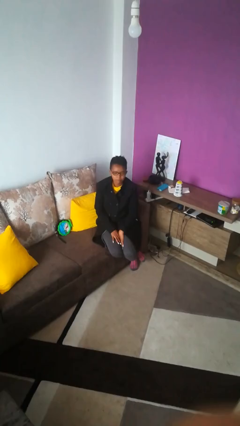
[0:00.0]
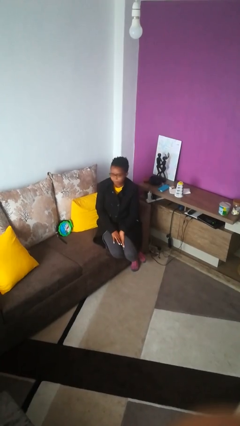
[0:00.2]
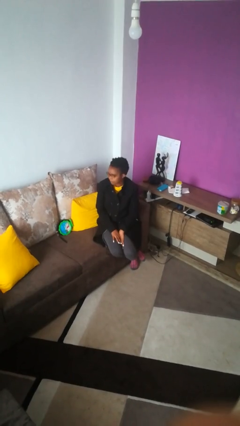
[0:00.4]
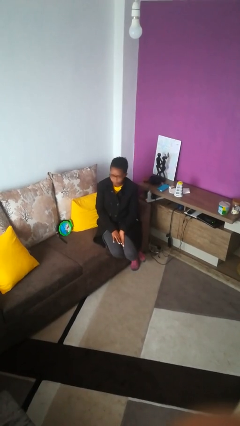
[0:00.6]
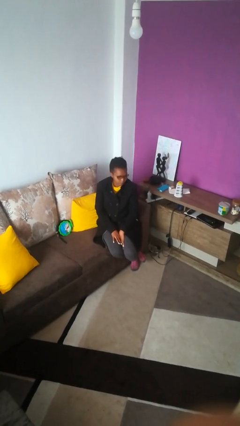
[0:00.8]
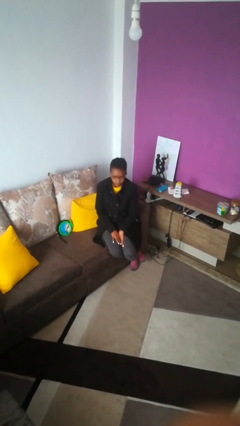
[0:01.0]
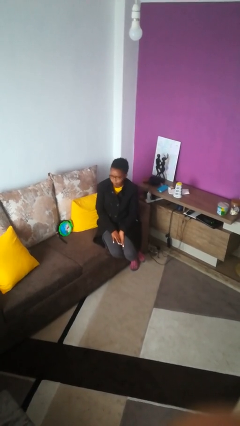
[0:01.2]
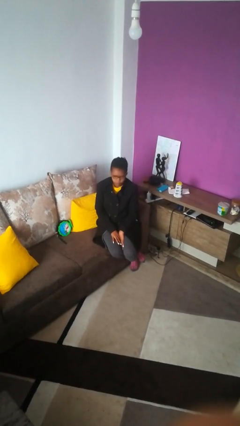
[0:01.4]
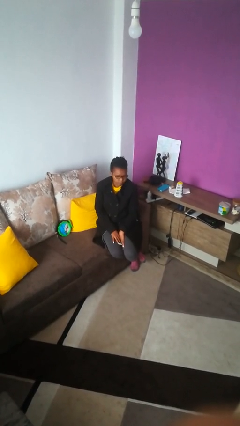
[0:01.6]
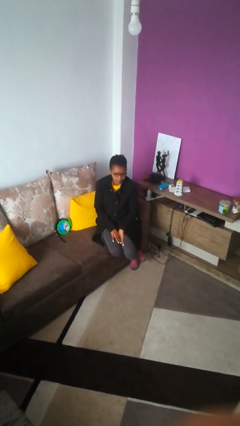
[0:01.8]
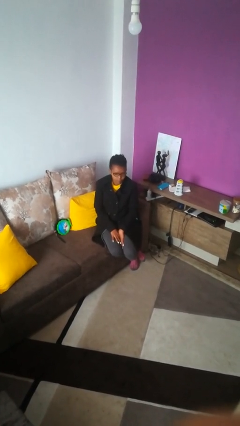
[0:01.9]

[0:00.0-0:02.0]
person shakes head

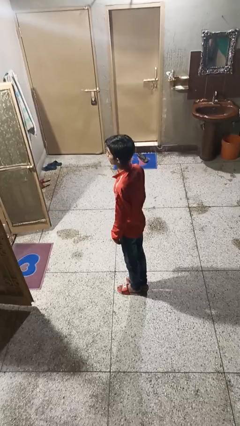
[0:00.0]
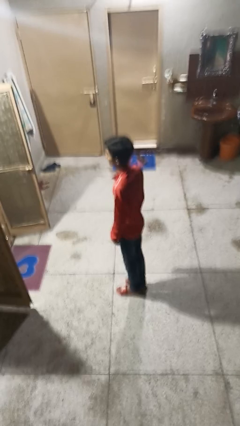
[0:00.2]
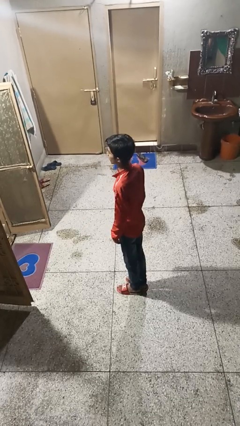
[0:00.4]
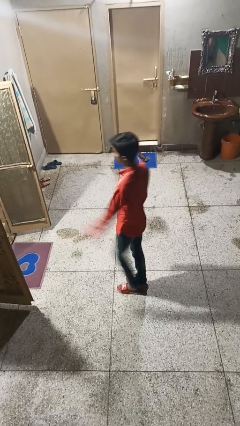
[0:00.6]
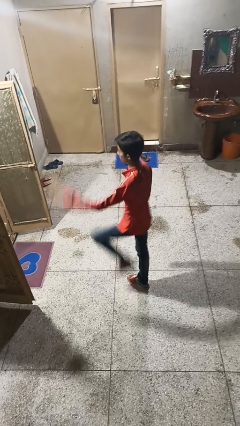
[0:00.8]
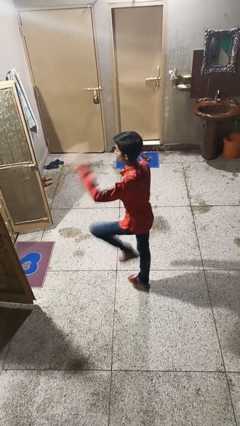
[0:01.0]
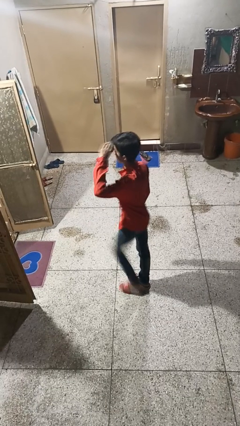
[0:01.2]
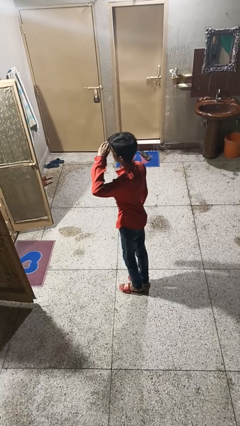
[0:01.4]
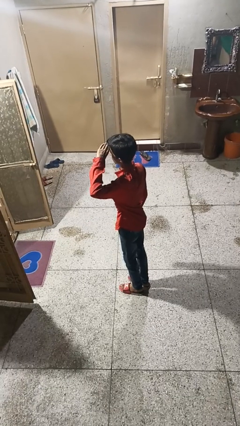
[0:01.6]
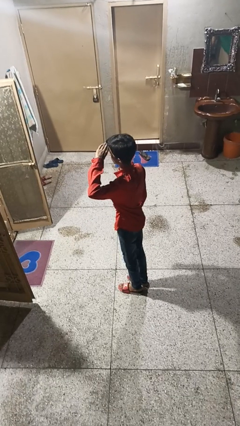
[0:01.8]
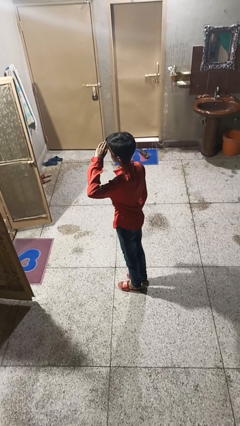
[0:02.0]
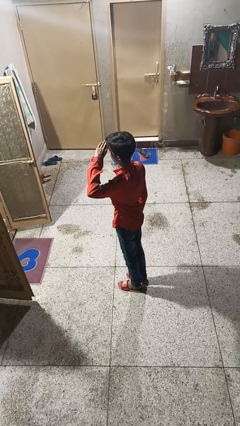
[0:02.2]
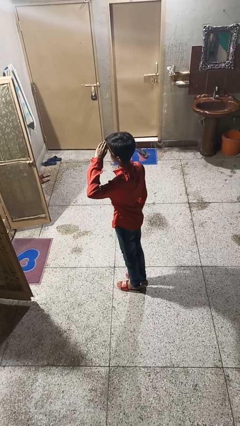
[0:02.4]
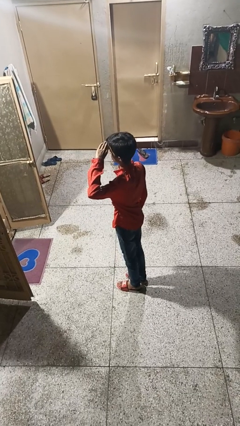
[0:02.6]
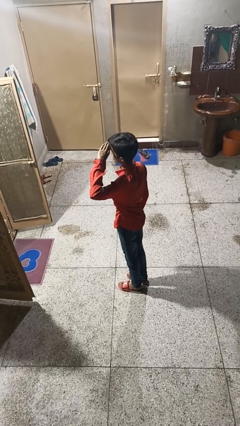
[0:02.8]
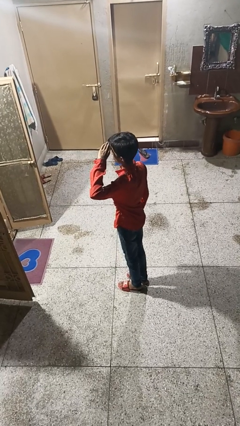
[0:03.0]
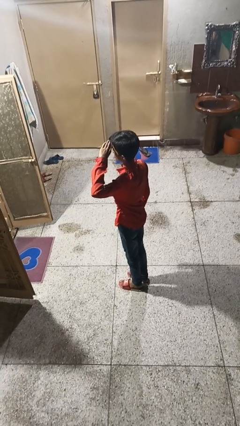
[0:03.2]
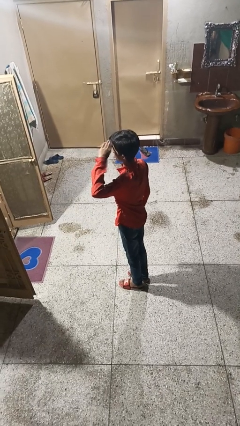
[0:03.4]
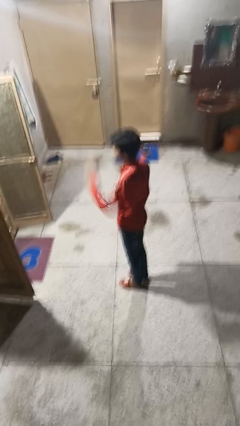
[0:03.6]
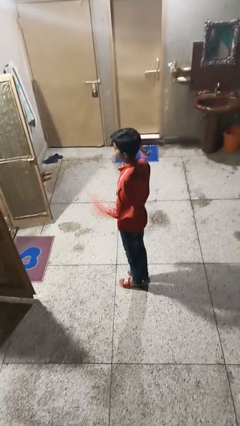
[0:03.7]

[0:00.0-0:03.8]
person salutes

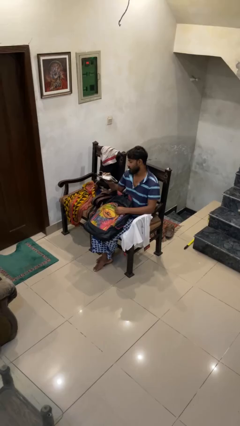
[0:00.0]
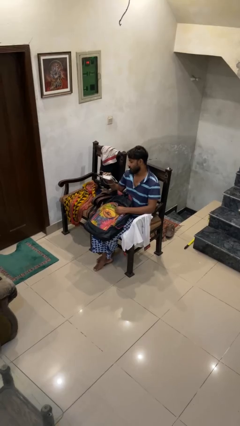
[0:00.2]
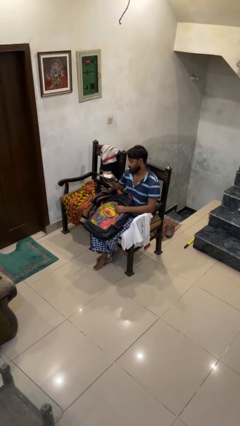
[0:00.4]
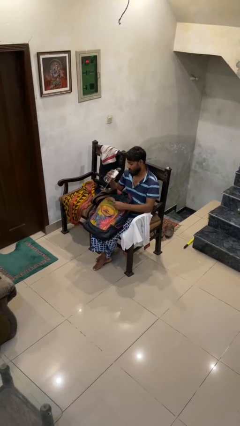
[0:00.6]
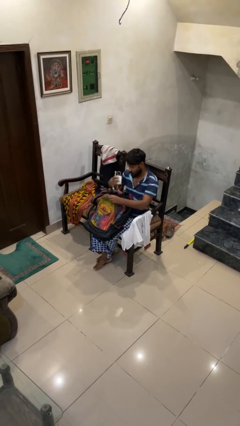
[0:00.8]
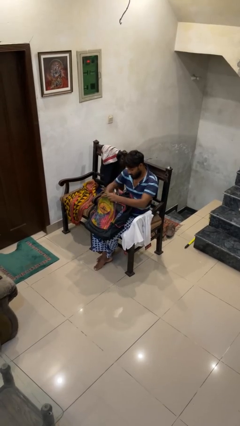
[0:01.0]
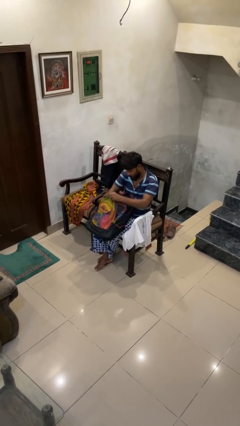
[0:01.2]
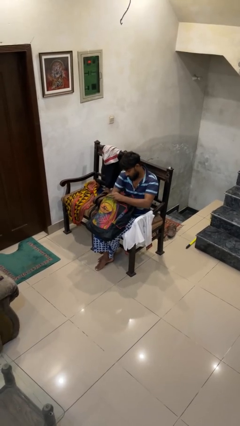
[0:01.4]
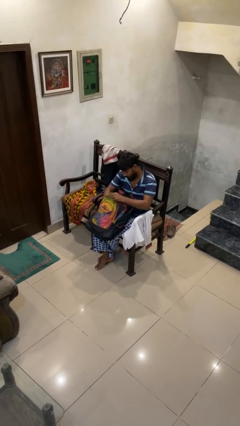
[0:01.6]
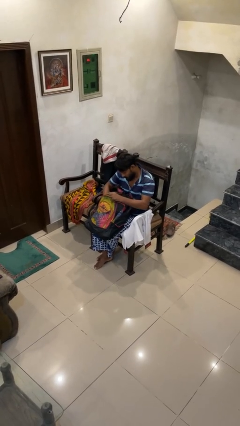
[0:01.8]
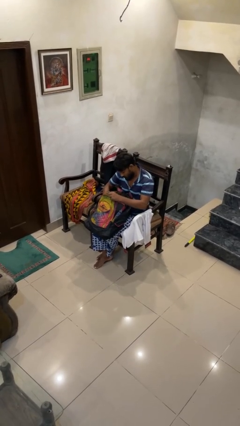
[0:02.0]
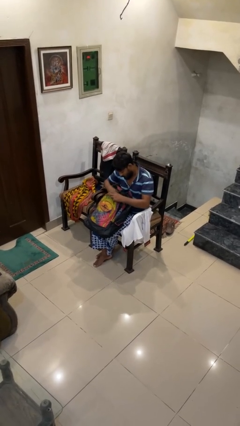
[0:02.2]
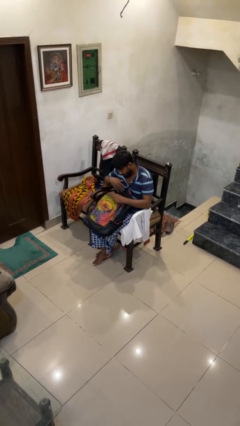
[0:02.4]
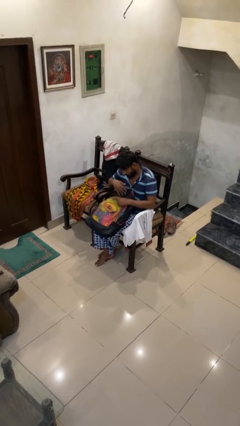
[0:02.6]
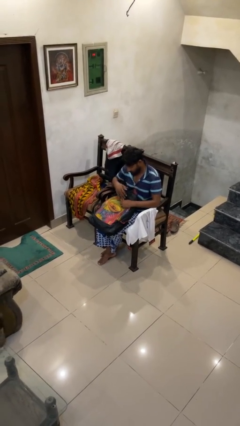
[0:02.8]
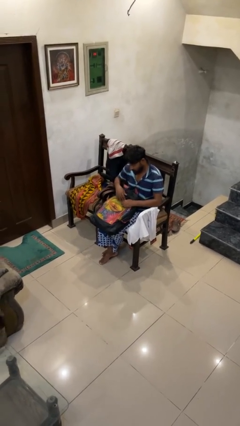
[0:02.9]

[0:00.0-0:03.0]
person puts object into backpack

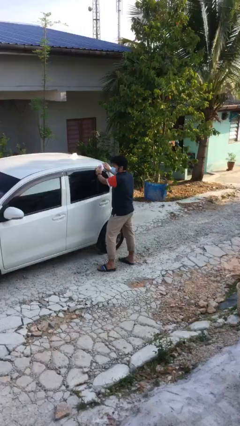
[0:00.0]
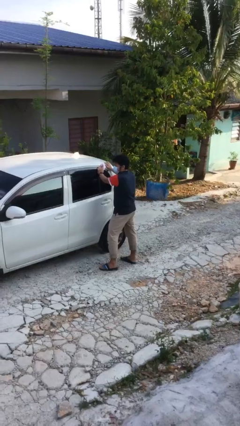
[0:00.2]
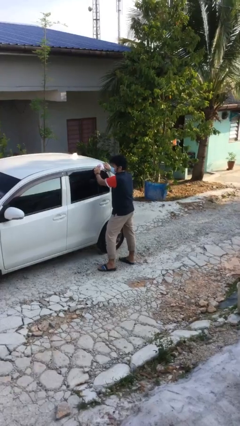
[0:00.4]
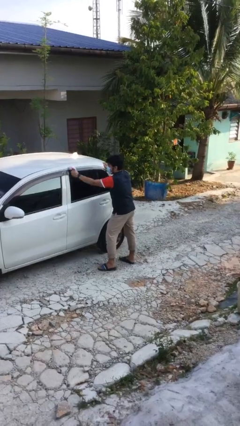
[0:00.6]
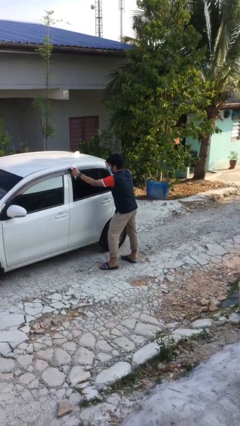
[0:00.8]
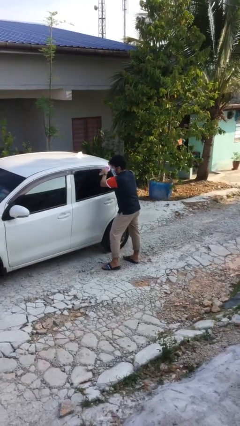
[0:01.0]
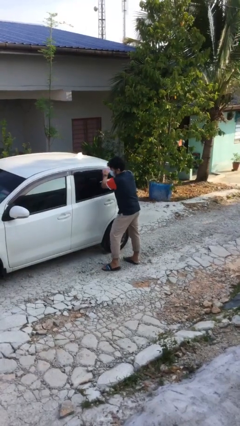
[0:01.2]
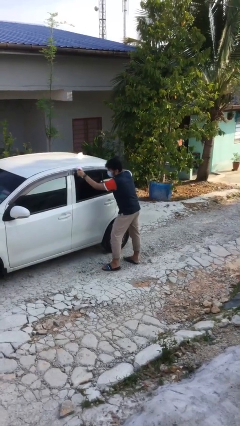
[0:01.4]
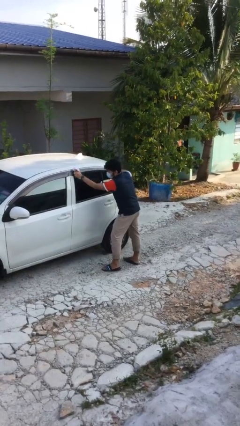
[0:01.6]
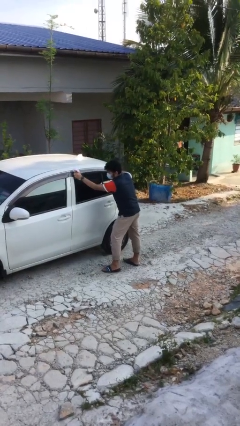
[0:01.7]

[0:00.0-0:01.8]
person polishes car with rag

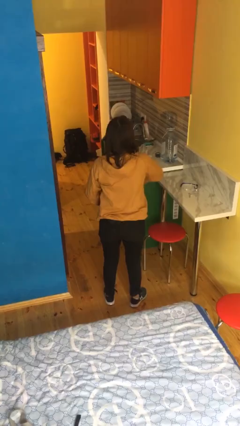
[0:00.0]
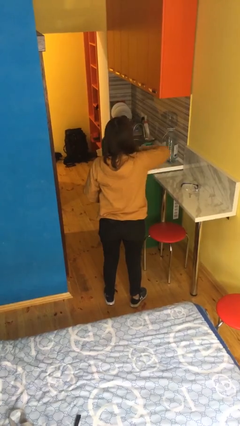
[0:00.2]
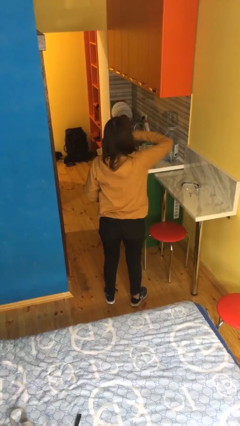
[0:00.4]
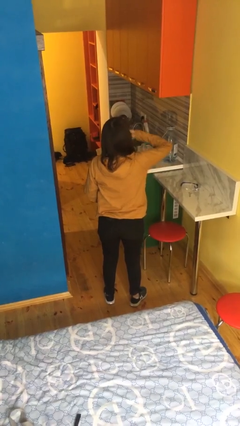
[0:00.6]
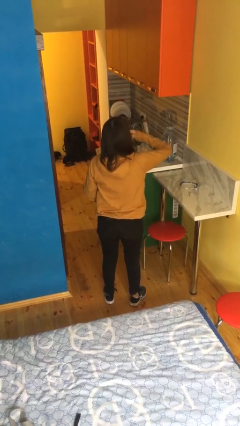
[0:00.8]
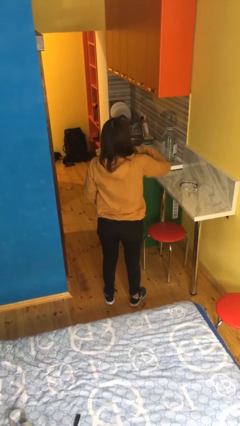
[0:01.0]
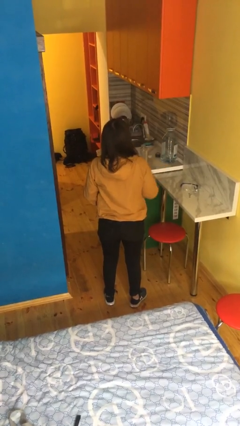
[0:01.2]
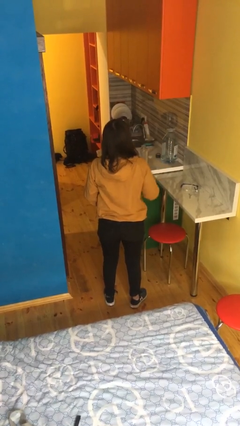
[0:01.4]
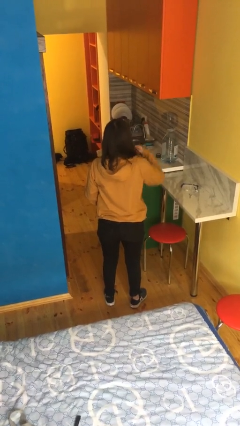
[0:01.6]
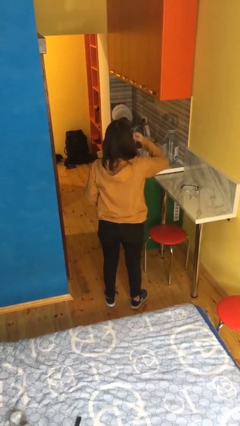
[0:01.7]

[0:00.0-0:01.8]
person zips up jacket

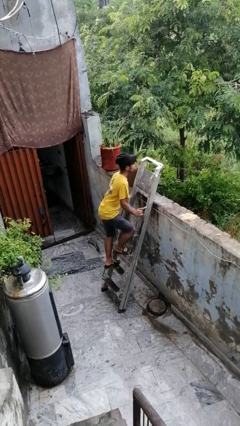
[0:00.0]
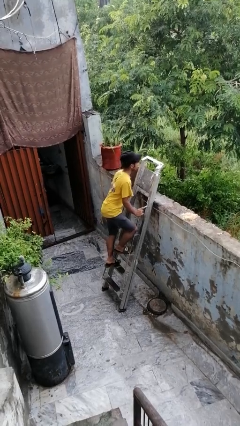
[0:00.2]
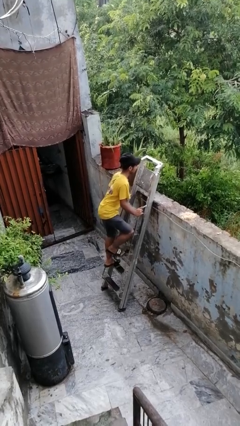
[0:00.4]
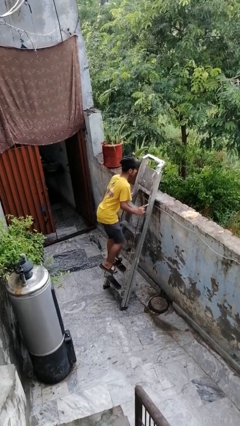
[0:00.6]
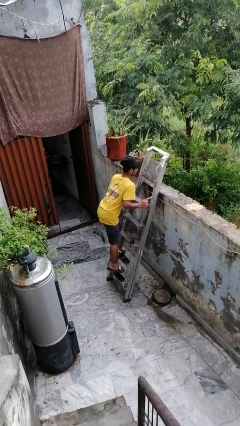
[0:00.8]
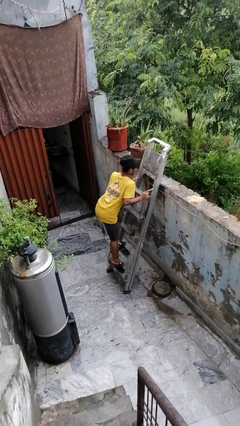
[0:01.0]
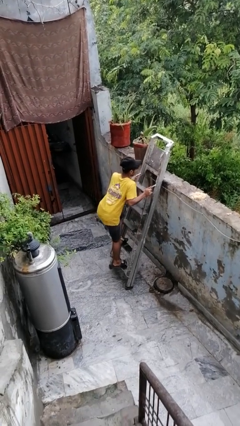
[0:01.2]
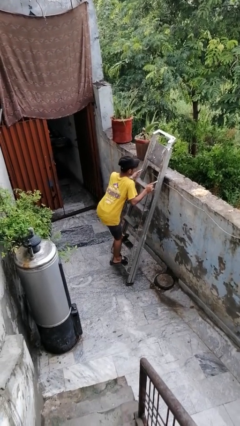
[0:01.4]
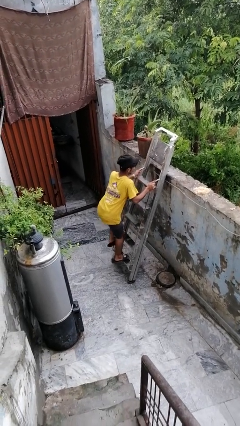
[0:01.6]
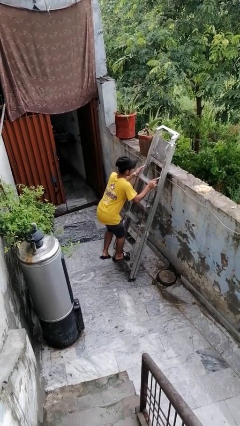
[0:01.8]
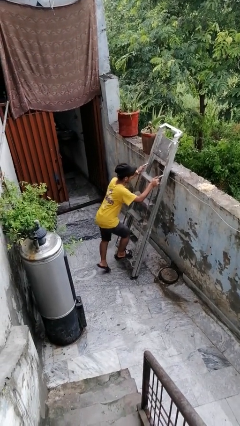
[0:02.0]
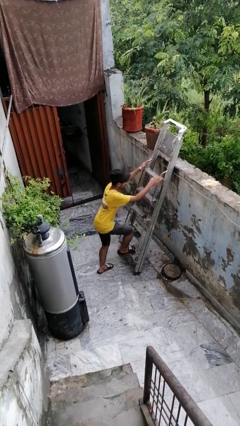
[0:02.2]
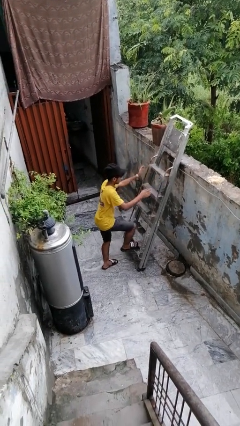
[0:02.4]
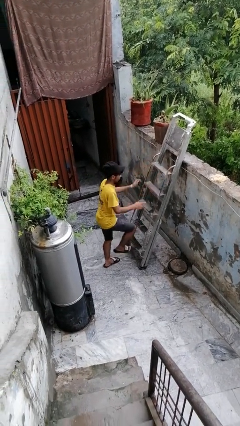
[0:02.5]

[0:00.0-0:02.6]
person climbs down ladder

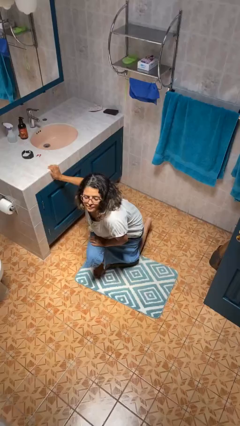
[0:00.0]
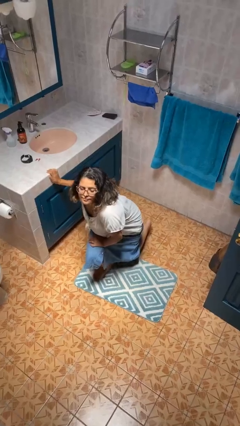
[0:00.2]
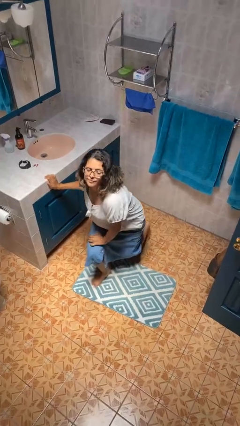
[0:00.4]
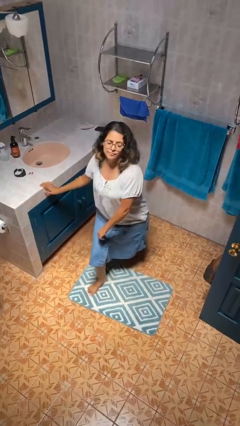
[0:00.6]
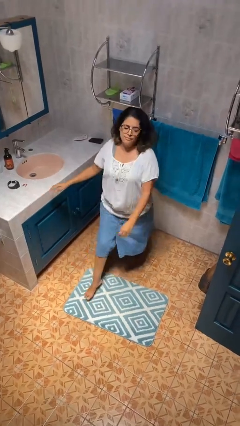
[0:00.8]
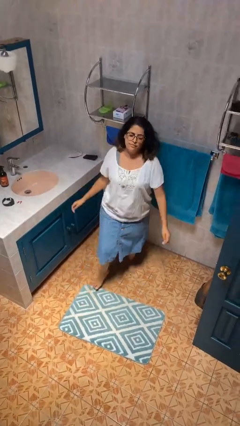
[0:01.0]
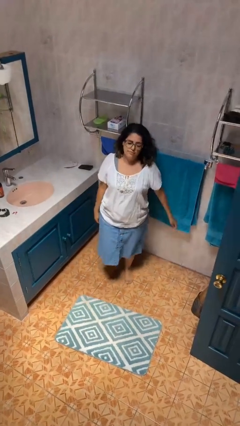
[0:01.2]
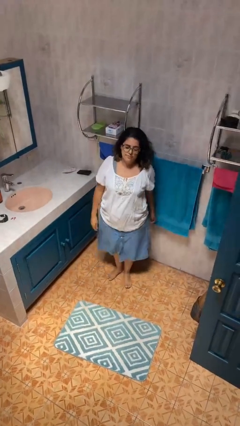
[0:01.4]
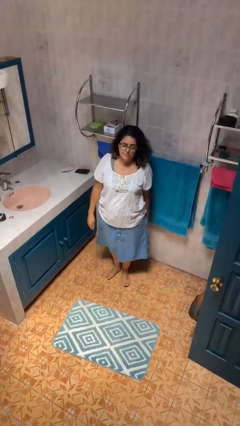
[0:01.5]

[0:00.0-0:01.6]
person stands up from floor

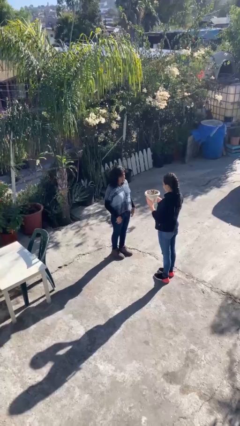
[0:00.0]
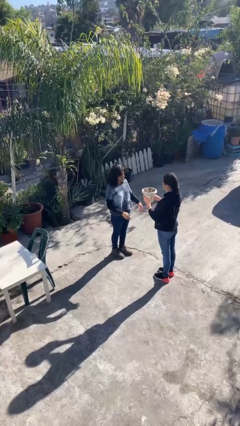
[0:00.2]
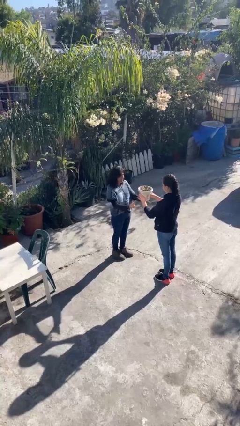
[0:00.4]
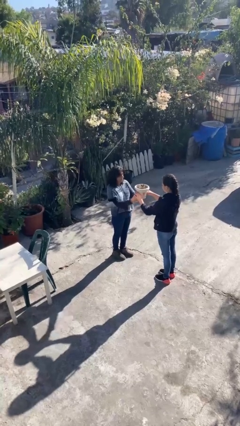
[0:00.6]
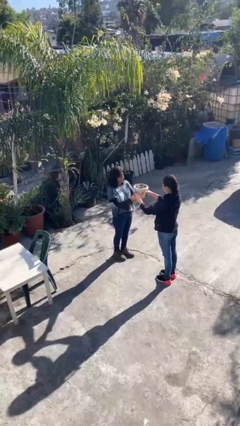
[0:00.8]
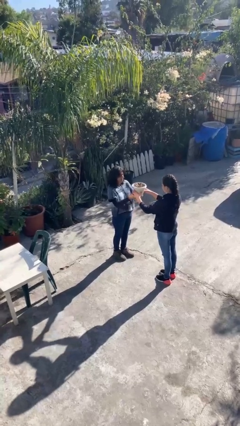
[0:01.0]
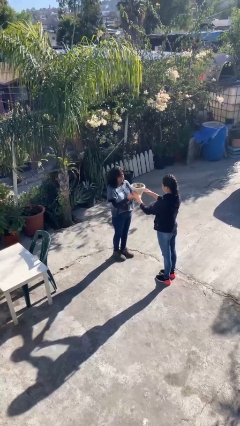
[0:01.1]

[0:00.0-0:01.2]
person transfers object to person
